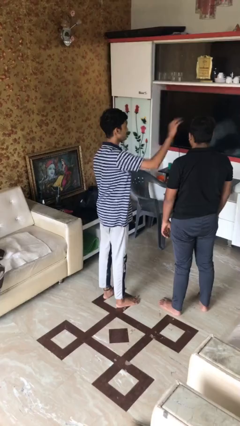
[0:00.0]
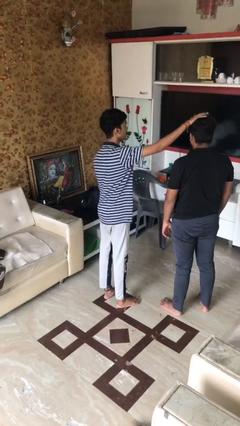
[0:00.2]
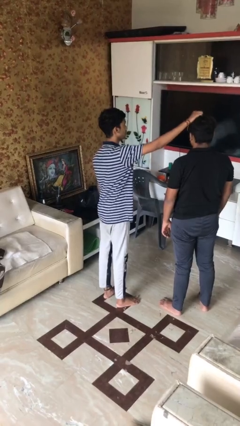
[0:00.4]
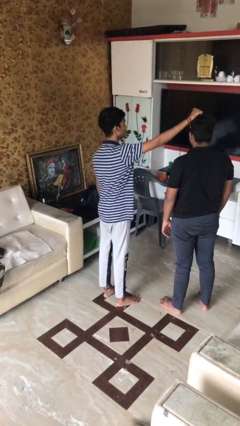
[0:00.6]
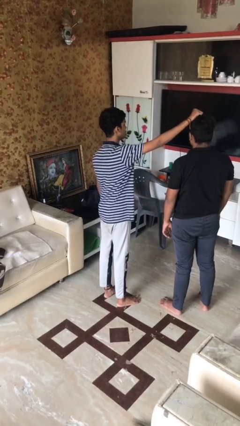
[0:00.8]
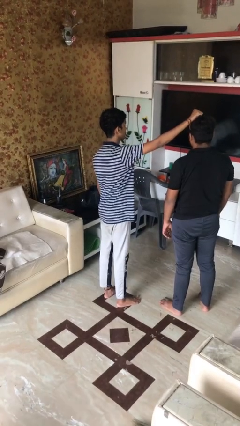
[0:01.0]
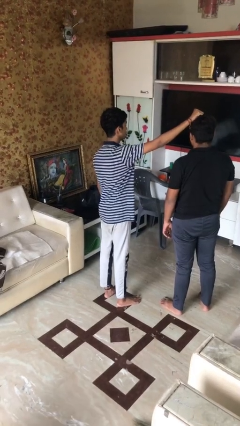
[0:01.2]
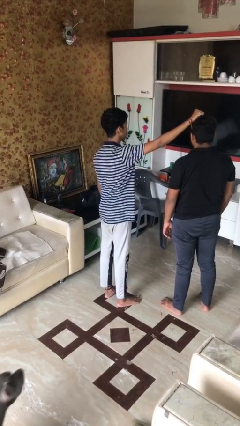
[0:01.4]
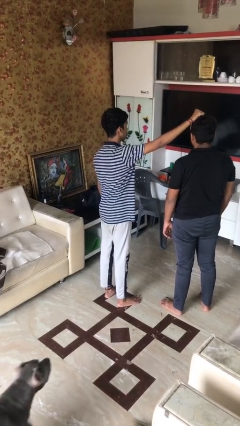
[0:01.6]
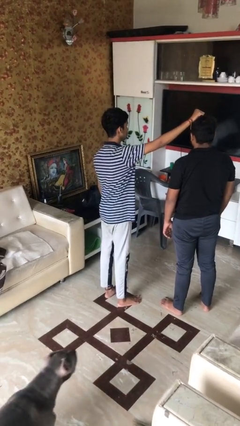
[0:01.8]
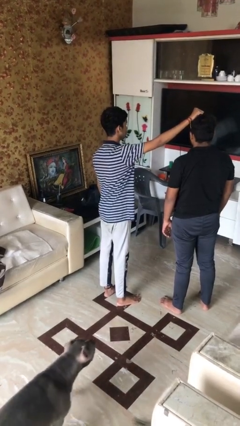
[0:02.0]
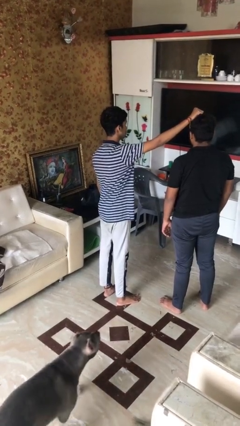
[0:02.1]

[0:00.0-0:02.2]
person grabs person by hair

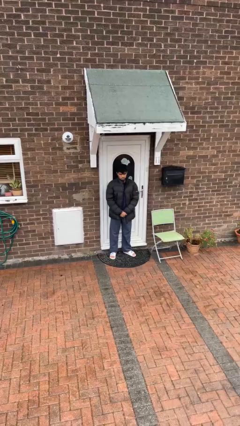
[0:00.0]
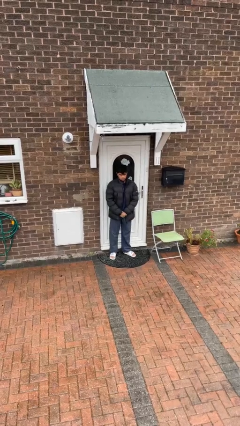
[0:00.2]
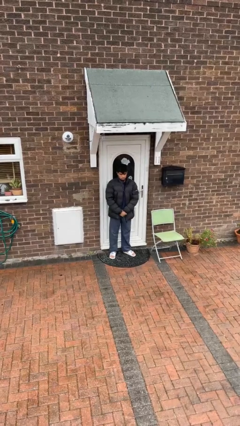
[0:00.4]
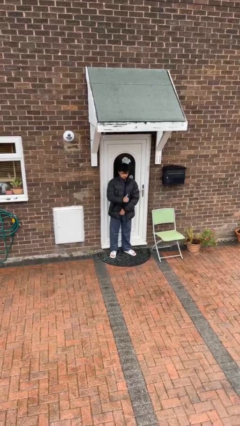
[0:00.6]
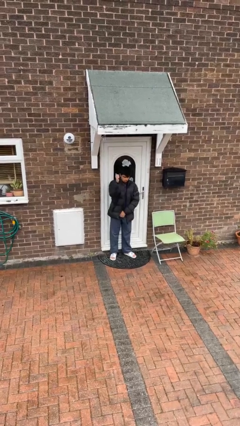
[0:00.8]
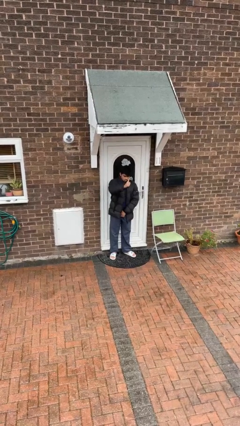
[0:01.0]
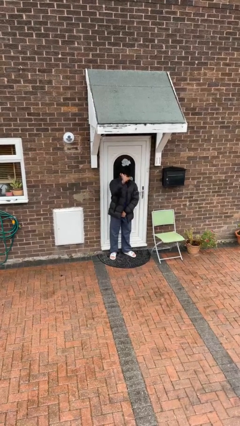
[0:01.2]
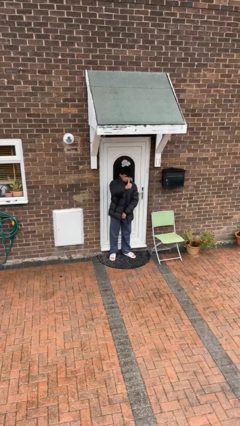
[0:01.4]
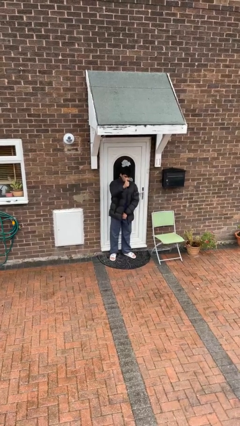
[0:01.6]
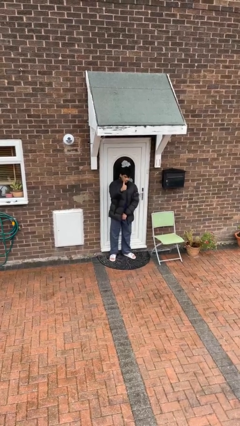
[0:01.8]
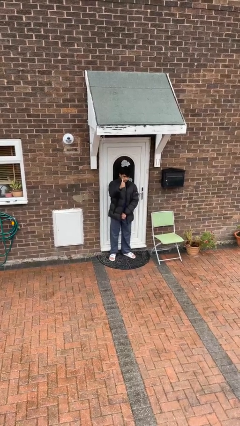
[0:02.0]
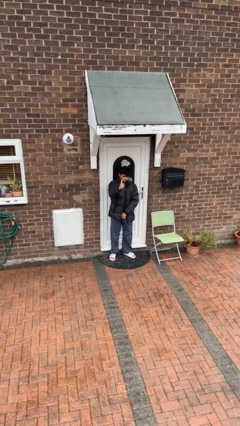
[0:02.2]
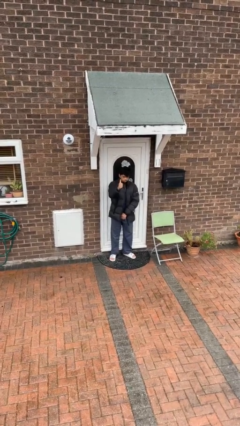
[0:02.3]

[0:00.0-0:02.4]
person gestures thumbs up

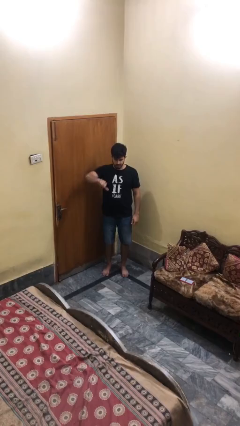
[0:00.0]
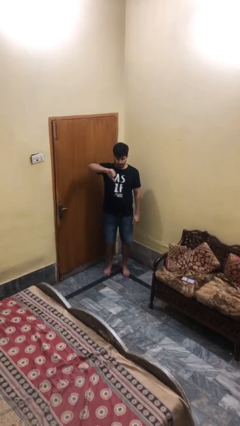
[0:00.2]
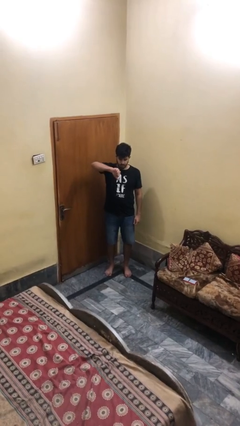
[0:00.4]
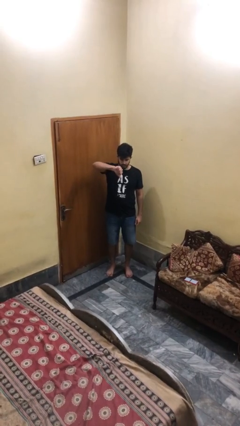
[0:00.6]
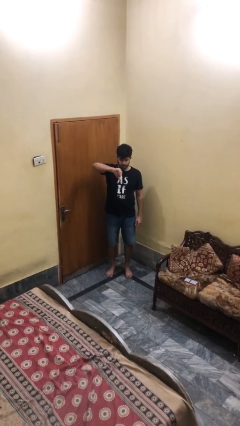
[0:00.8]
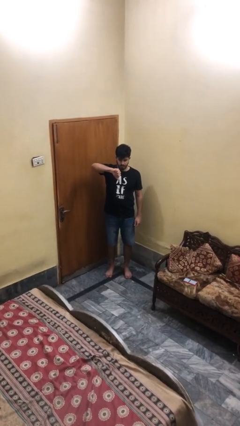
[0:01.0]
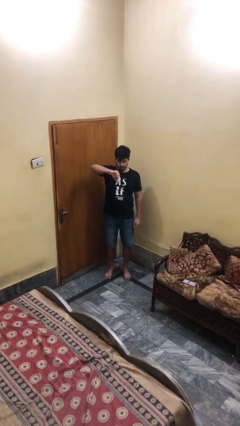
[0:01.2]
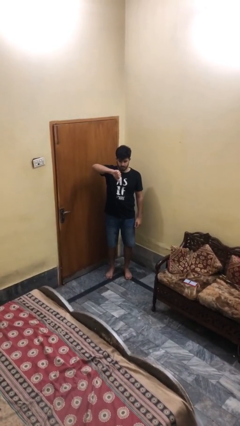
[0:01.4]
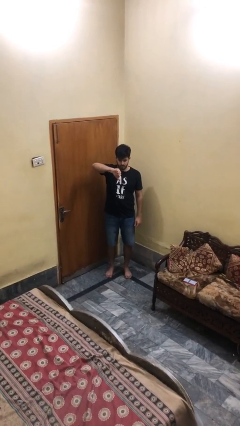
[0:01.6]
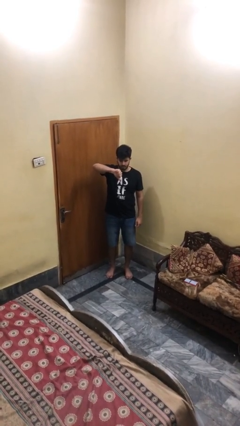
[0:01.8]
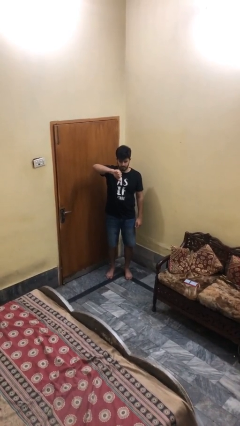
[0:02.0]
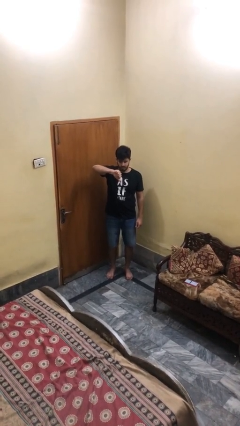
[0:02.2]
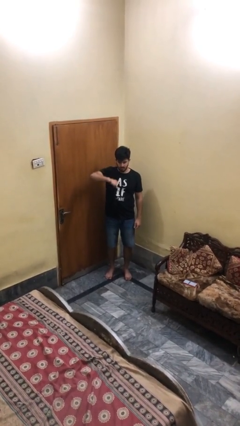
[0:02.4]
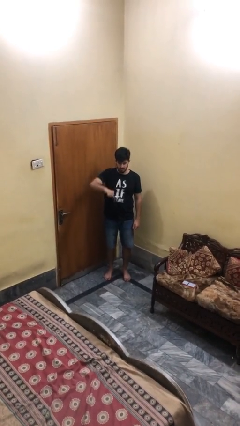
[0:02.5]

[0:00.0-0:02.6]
person gestures thumbs down

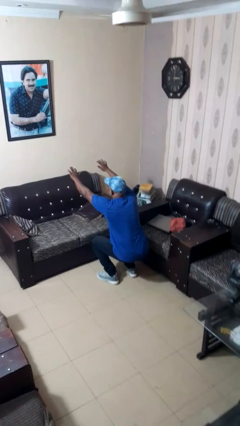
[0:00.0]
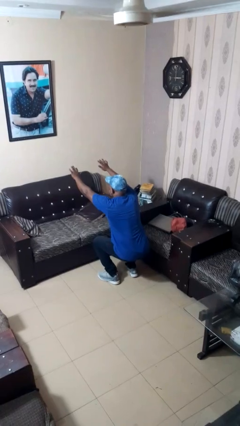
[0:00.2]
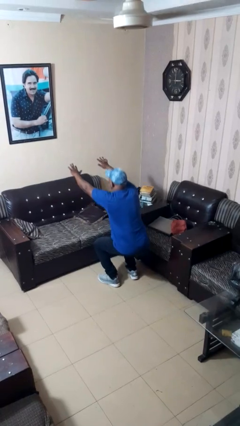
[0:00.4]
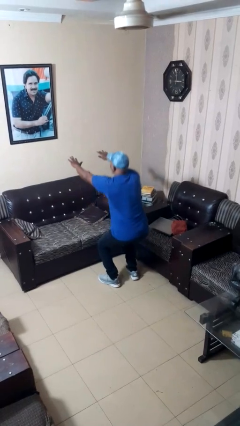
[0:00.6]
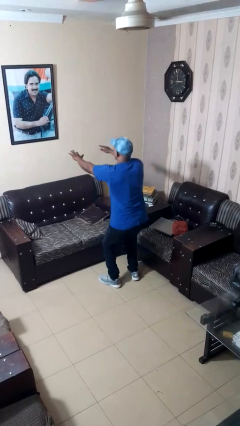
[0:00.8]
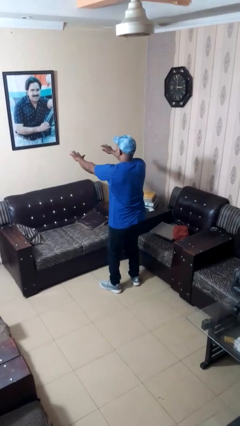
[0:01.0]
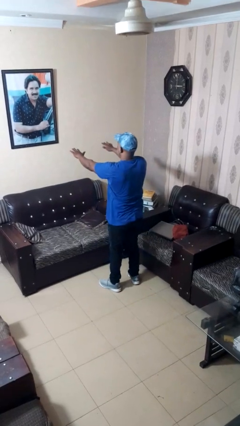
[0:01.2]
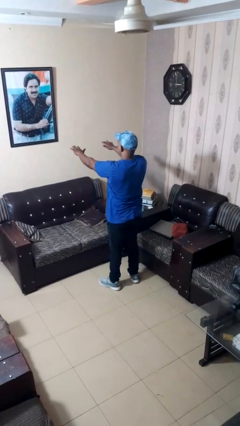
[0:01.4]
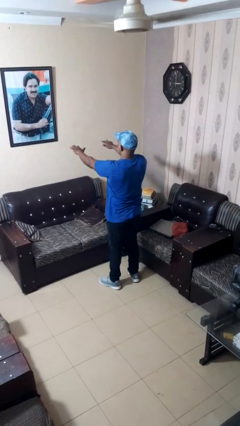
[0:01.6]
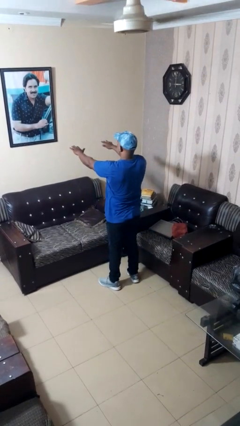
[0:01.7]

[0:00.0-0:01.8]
person stands up

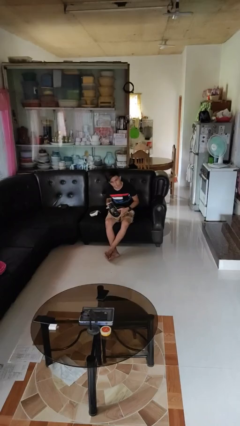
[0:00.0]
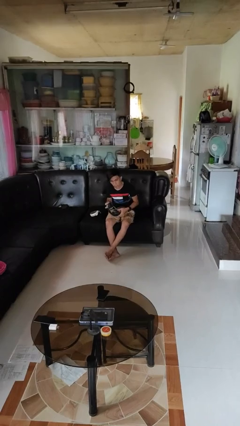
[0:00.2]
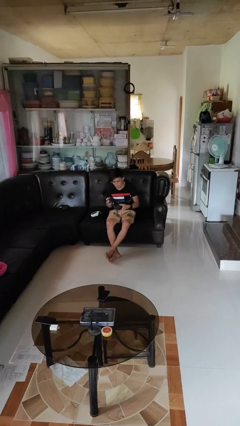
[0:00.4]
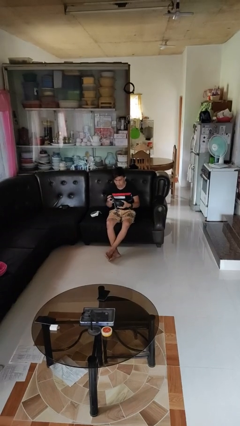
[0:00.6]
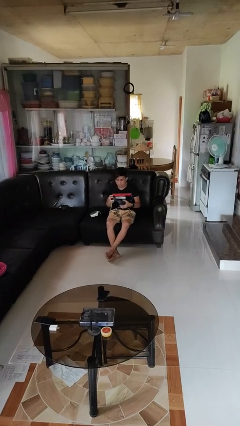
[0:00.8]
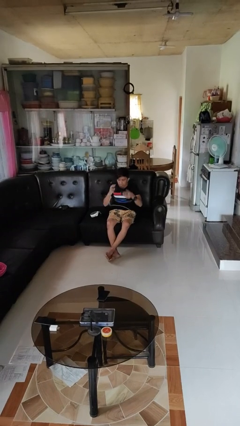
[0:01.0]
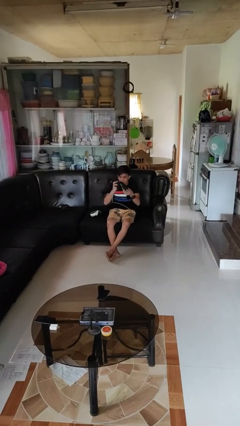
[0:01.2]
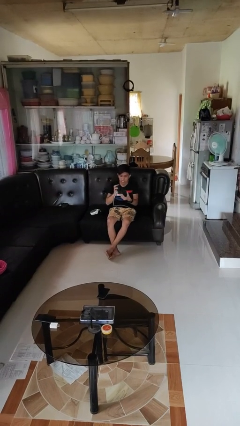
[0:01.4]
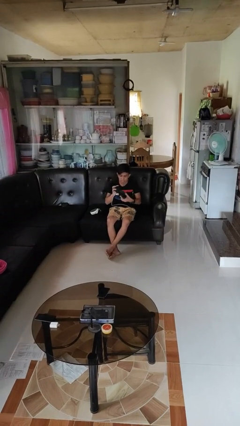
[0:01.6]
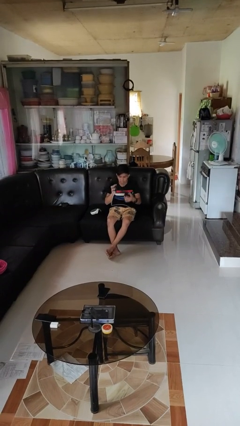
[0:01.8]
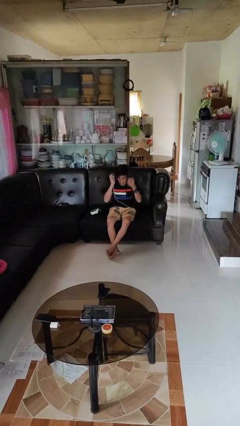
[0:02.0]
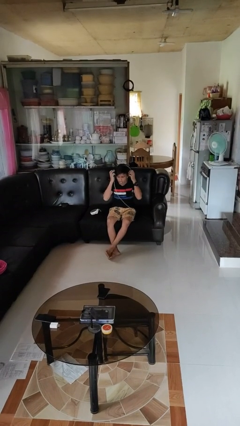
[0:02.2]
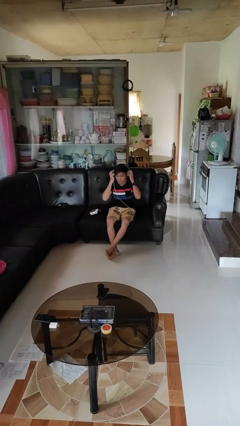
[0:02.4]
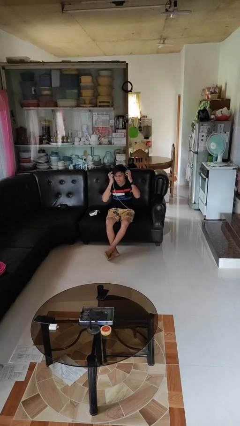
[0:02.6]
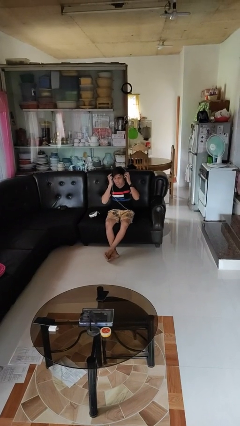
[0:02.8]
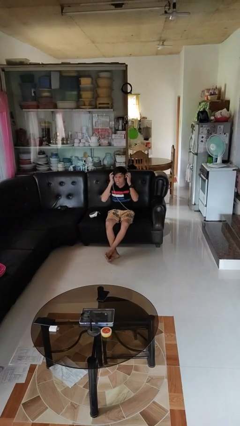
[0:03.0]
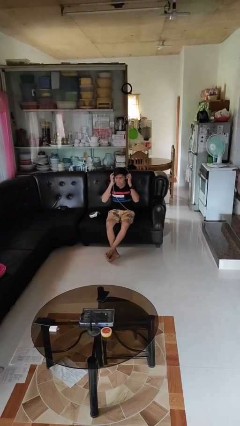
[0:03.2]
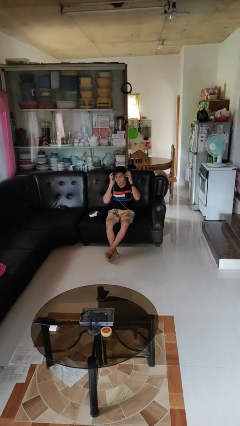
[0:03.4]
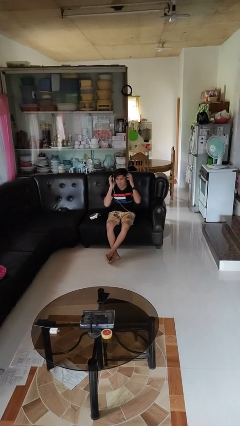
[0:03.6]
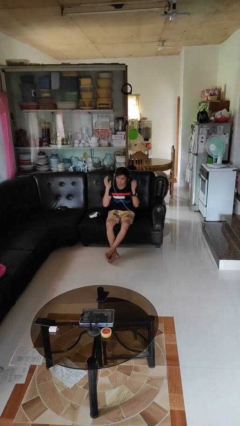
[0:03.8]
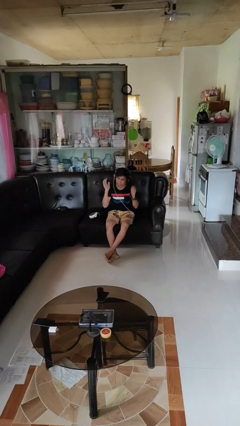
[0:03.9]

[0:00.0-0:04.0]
person puts on headphones

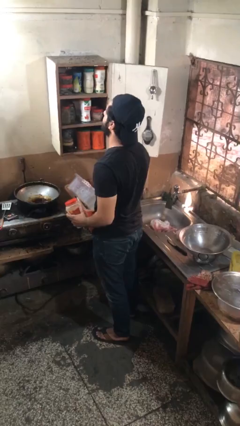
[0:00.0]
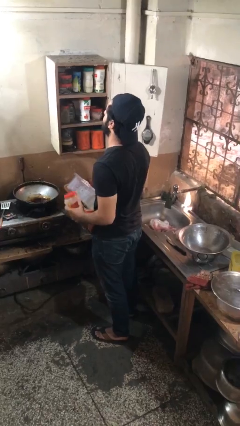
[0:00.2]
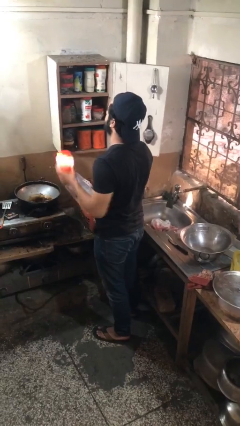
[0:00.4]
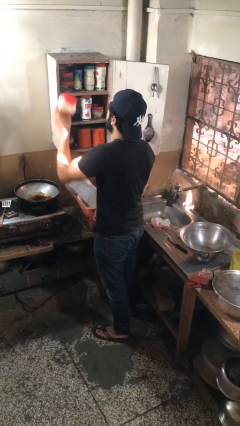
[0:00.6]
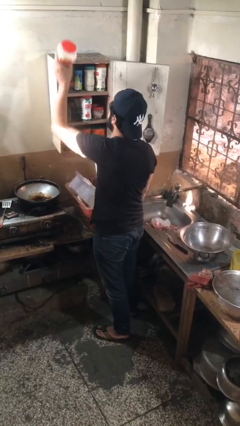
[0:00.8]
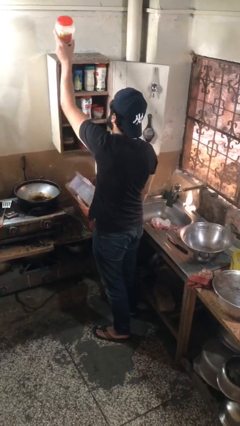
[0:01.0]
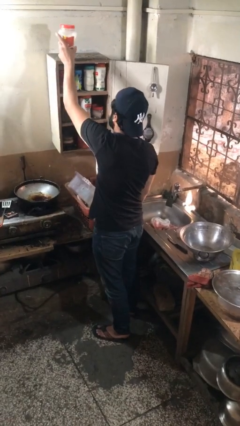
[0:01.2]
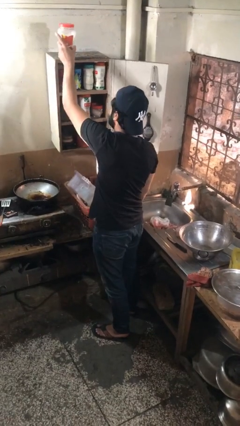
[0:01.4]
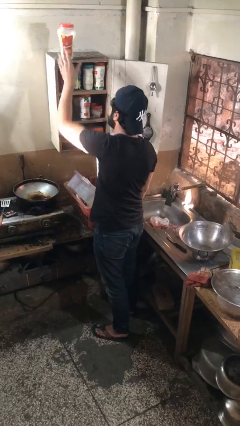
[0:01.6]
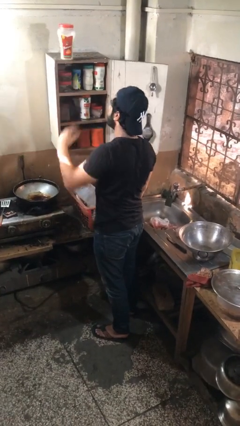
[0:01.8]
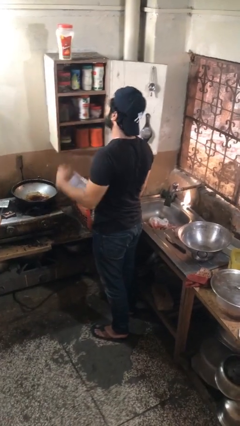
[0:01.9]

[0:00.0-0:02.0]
person puts object in cabinet

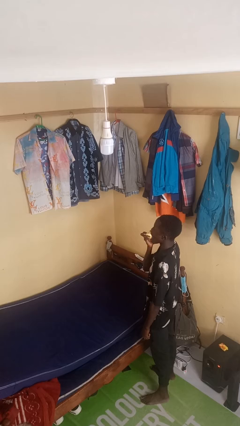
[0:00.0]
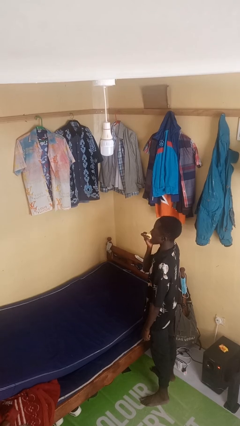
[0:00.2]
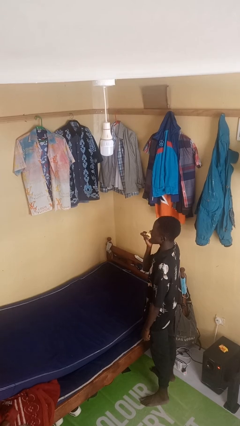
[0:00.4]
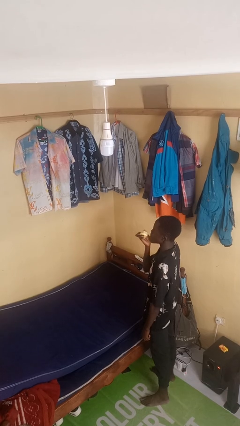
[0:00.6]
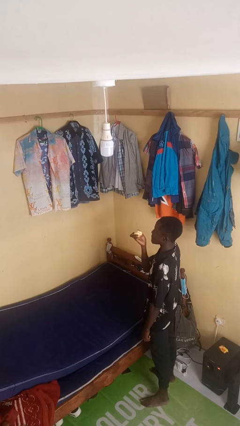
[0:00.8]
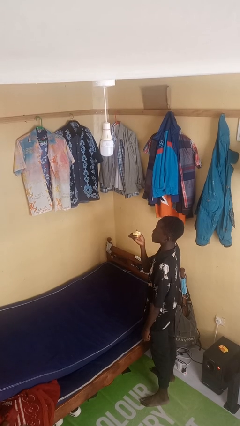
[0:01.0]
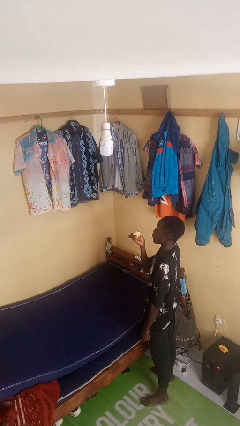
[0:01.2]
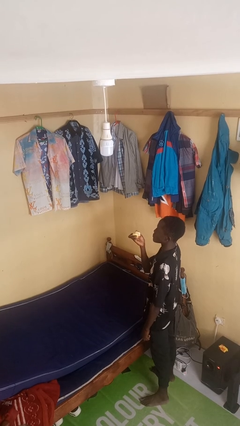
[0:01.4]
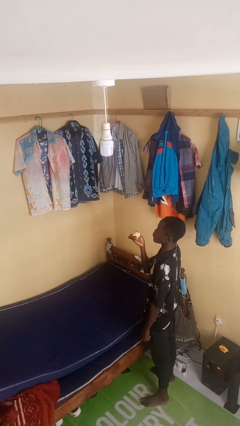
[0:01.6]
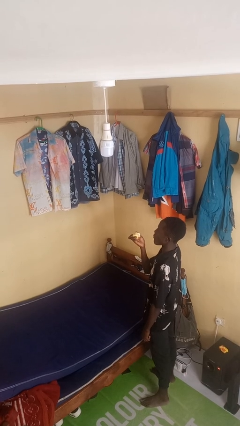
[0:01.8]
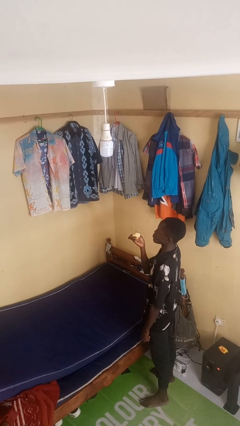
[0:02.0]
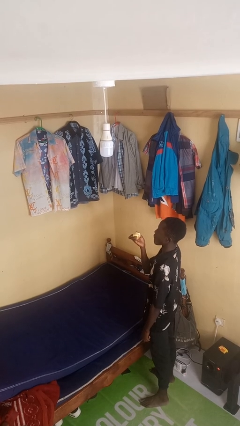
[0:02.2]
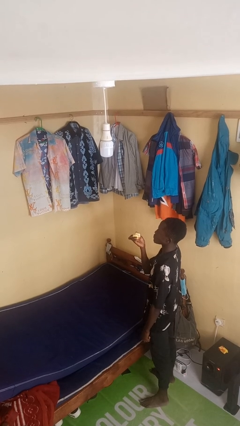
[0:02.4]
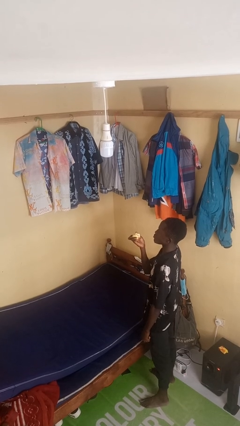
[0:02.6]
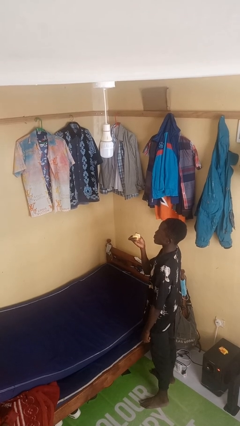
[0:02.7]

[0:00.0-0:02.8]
person eats apple
